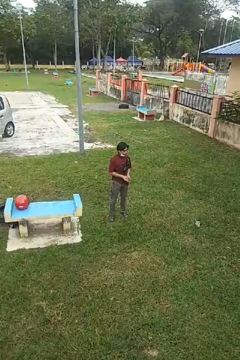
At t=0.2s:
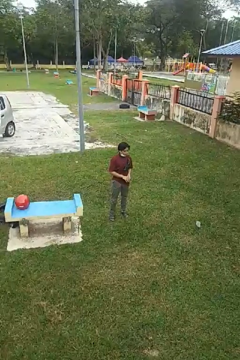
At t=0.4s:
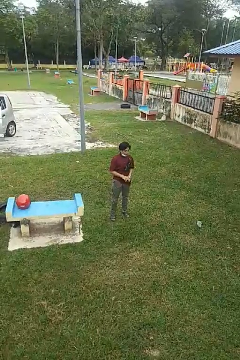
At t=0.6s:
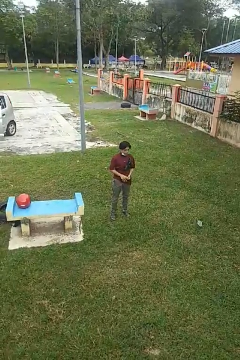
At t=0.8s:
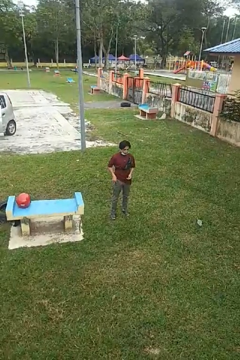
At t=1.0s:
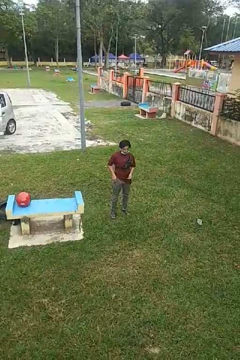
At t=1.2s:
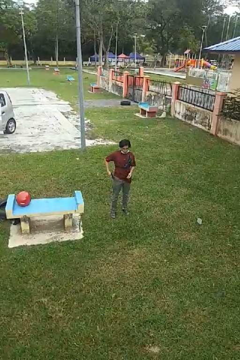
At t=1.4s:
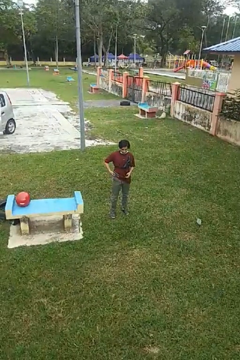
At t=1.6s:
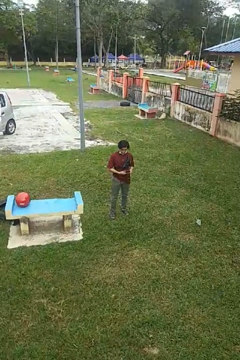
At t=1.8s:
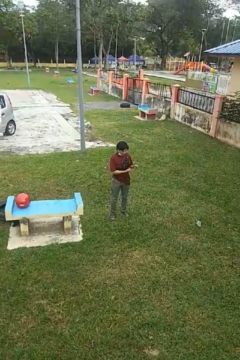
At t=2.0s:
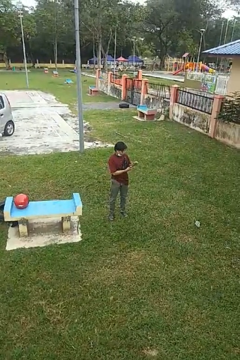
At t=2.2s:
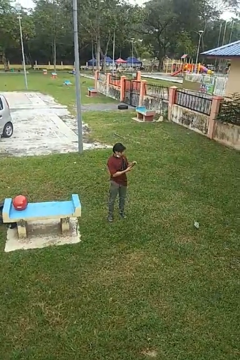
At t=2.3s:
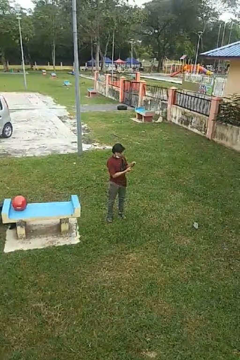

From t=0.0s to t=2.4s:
person takes phone from pocket

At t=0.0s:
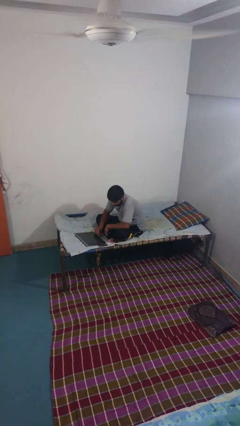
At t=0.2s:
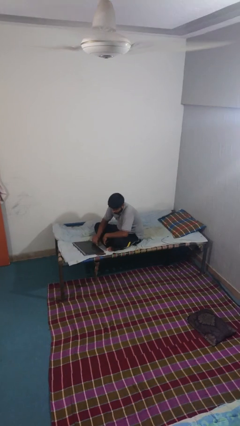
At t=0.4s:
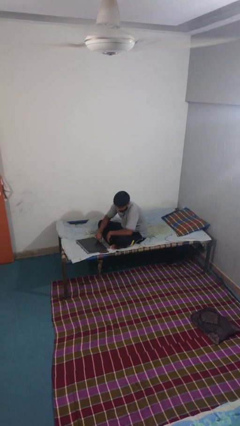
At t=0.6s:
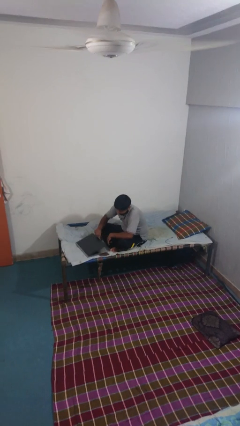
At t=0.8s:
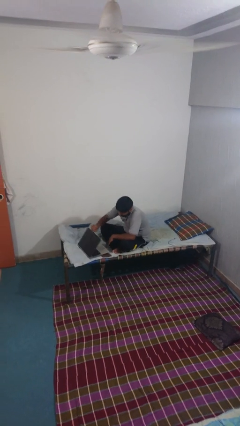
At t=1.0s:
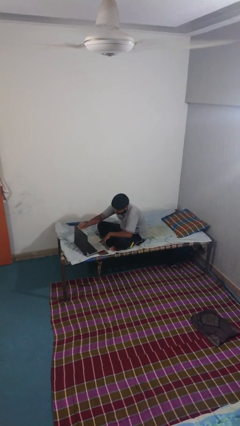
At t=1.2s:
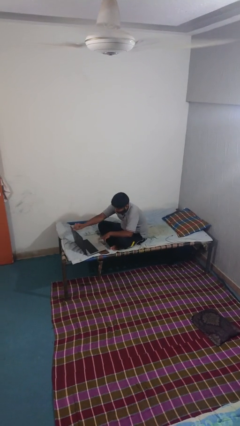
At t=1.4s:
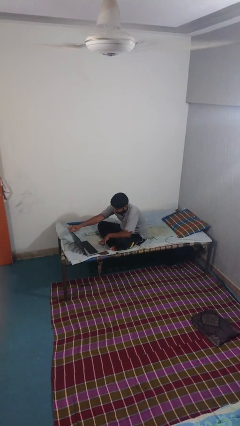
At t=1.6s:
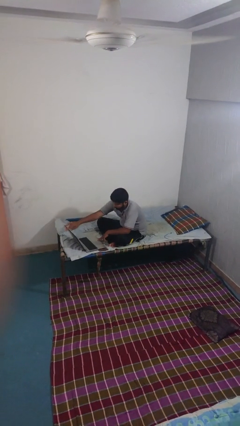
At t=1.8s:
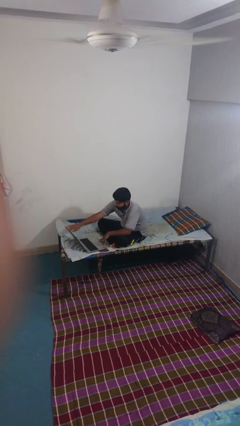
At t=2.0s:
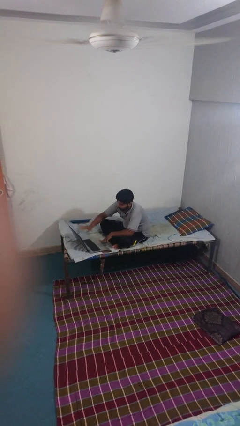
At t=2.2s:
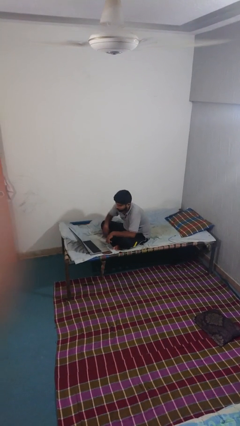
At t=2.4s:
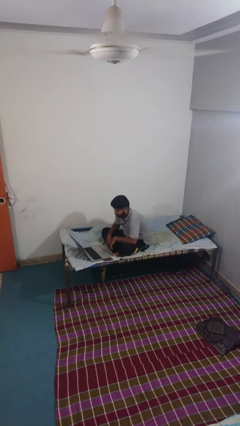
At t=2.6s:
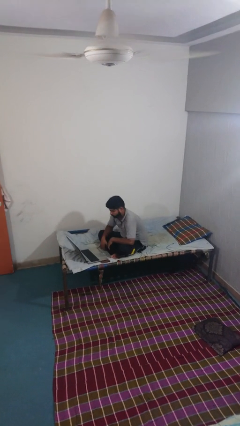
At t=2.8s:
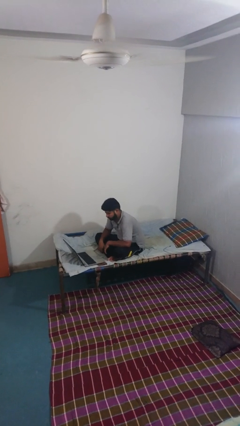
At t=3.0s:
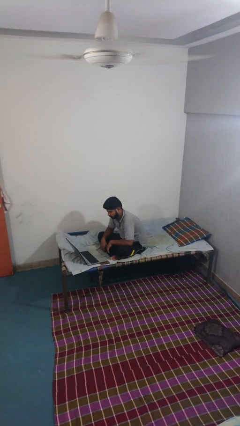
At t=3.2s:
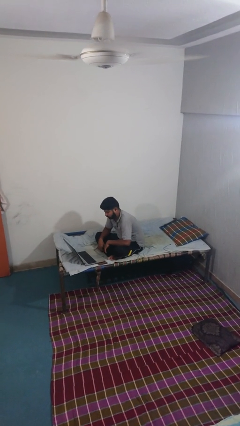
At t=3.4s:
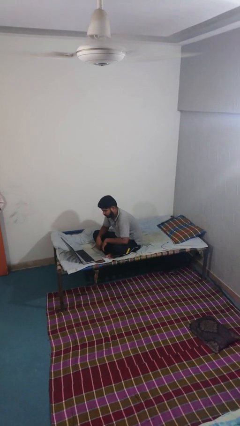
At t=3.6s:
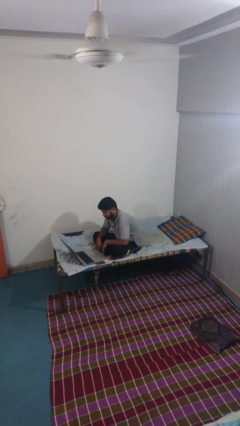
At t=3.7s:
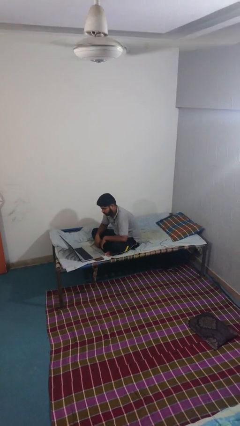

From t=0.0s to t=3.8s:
person closes laptop

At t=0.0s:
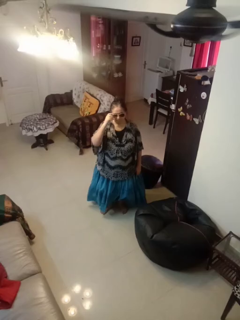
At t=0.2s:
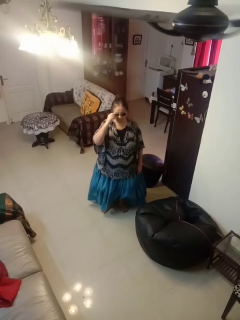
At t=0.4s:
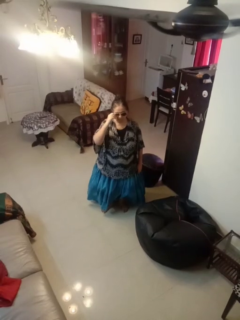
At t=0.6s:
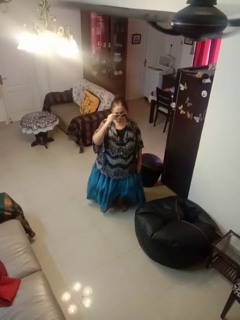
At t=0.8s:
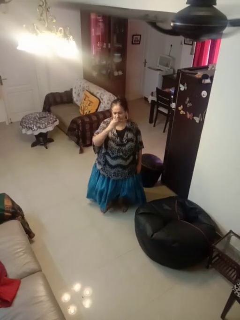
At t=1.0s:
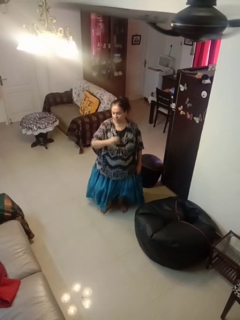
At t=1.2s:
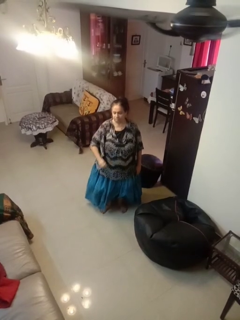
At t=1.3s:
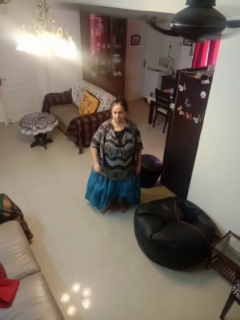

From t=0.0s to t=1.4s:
person takes off sunglasses

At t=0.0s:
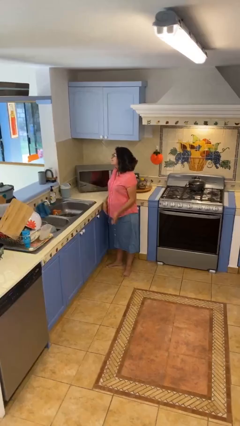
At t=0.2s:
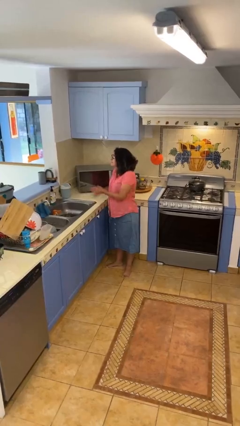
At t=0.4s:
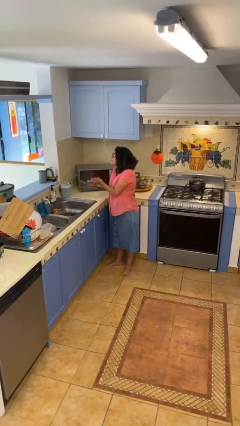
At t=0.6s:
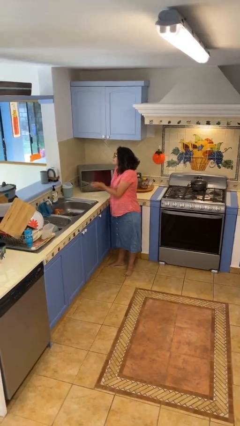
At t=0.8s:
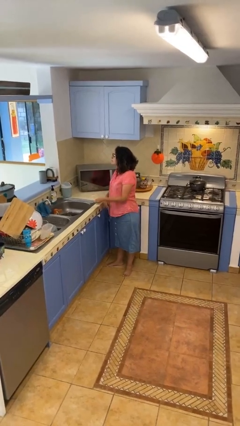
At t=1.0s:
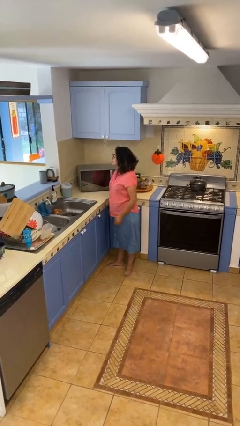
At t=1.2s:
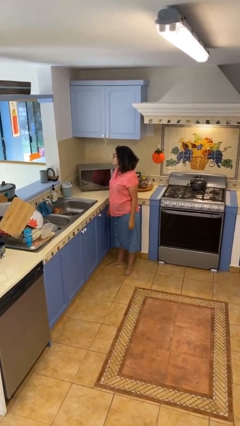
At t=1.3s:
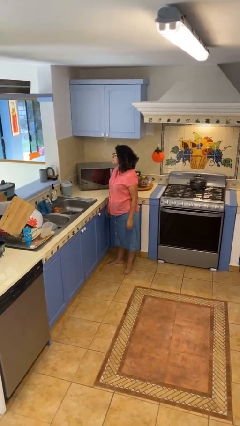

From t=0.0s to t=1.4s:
person claps hands

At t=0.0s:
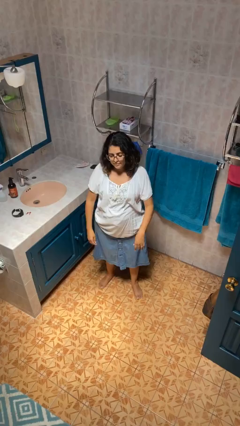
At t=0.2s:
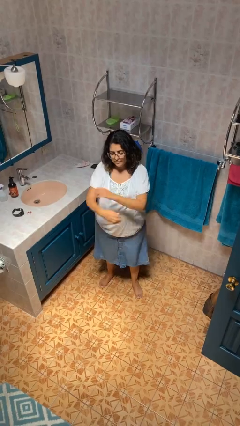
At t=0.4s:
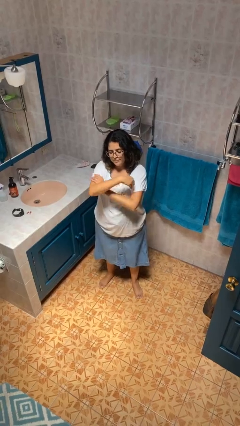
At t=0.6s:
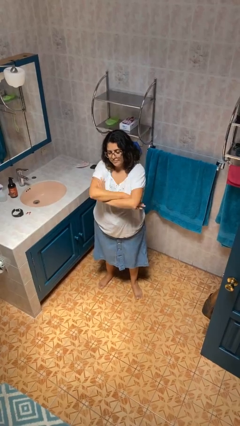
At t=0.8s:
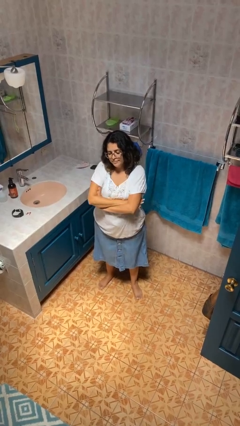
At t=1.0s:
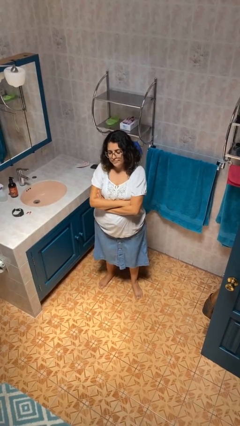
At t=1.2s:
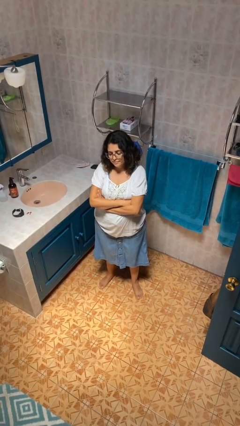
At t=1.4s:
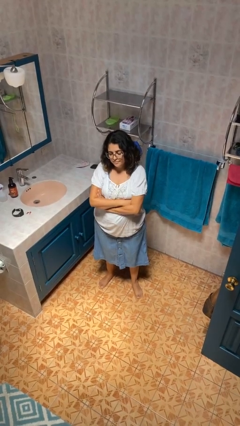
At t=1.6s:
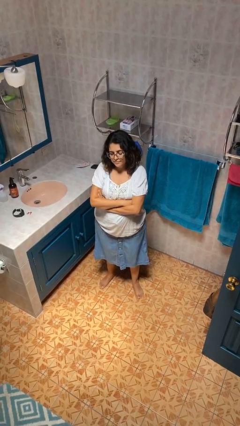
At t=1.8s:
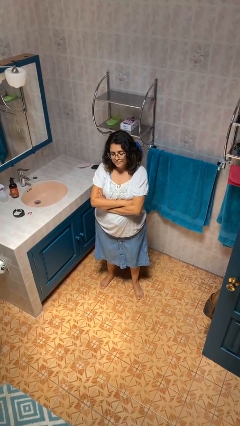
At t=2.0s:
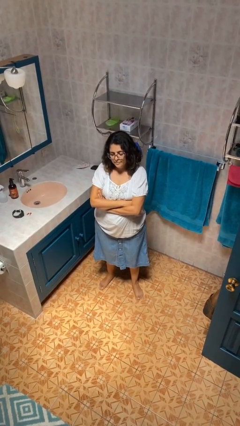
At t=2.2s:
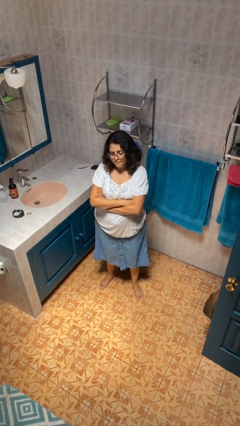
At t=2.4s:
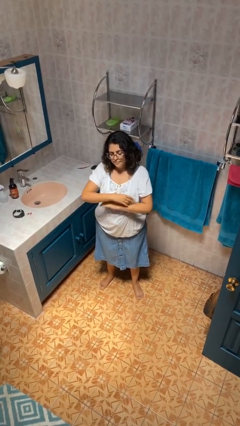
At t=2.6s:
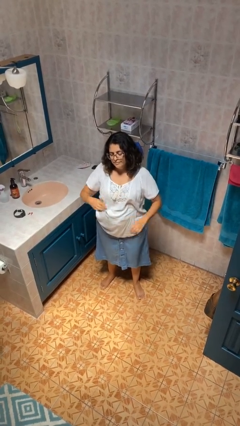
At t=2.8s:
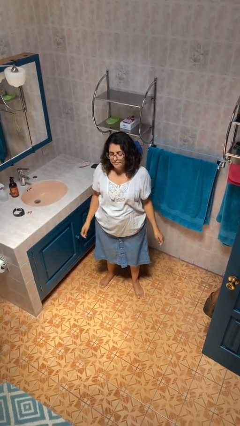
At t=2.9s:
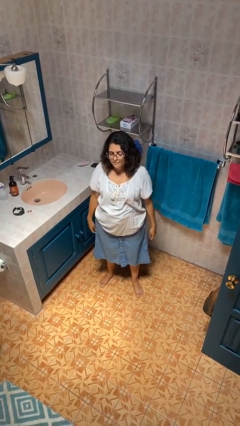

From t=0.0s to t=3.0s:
person crosses arms

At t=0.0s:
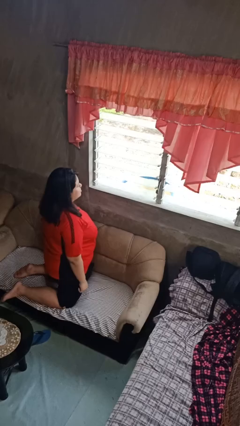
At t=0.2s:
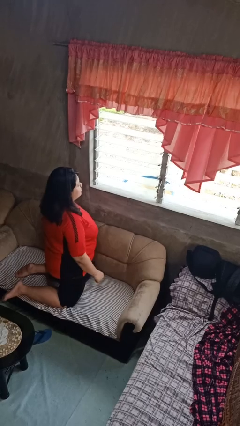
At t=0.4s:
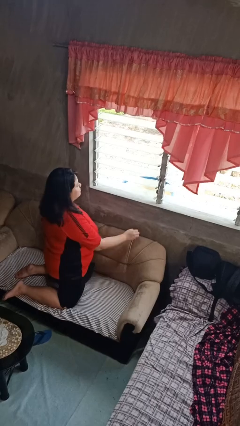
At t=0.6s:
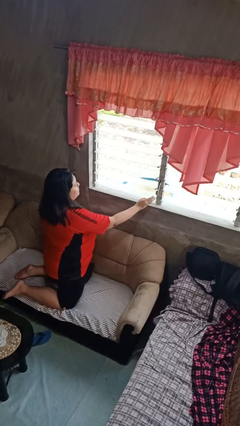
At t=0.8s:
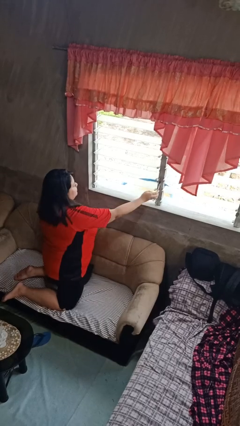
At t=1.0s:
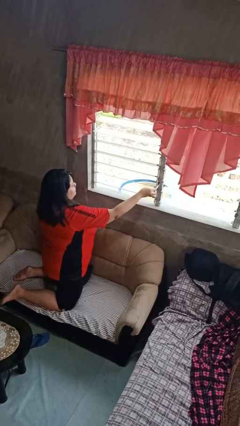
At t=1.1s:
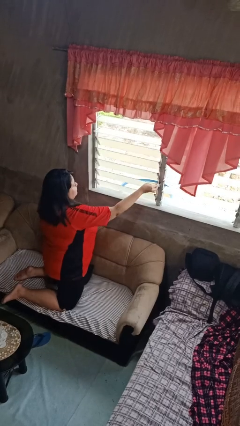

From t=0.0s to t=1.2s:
person closes home window

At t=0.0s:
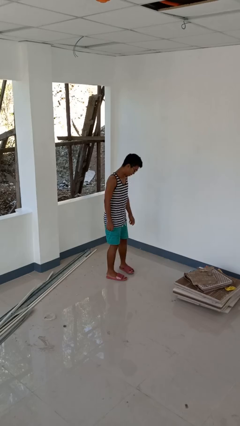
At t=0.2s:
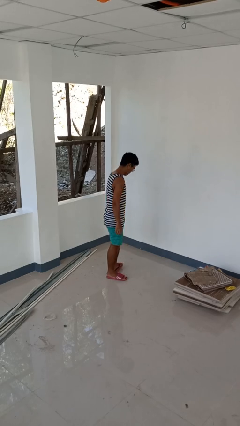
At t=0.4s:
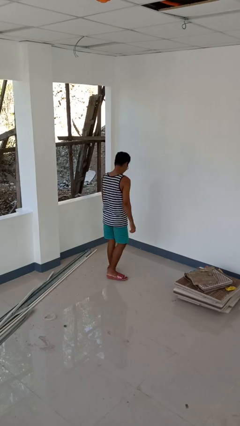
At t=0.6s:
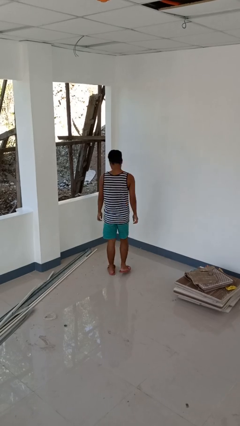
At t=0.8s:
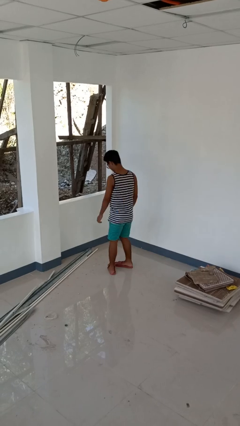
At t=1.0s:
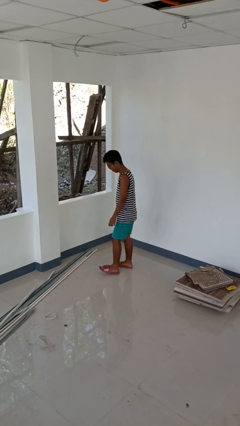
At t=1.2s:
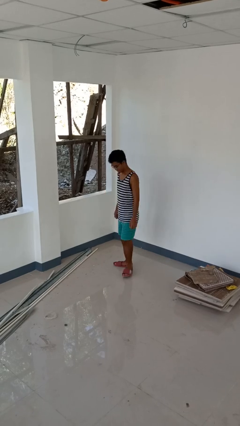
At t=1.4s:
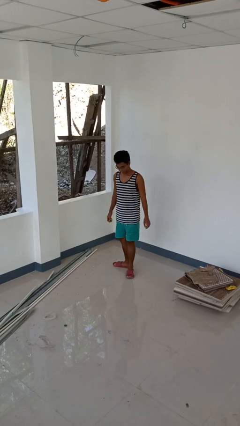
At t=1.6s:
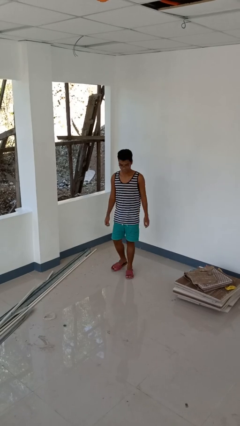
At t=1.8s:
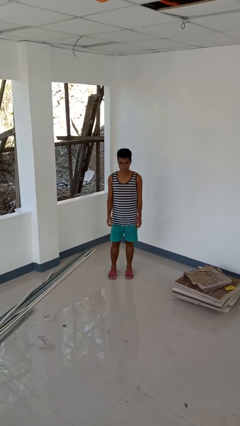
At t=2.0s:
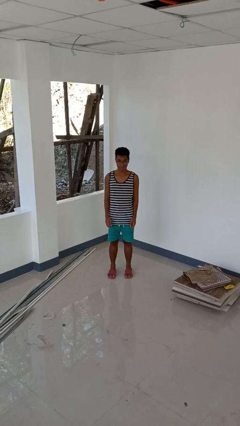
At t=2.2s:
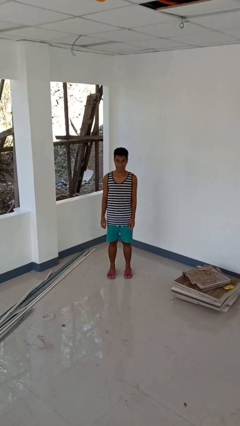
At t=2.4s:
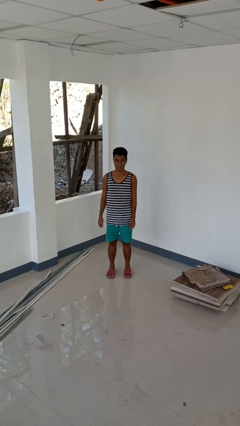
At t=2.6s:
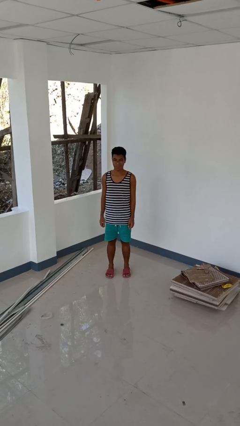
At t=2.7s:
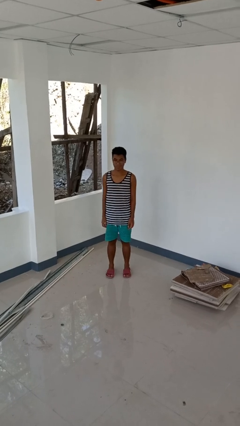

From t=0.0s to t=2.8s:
person twirls

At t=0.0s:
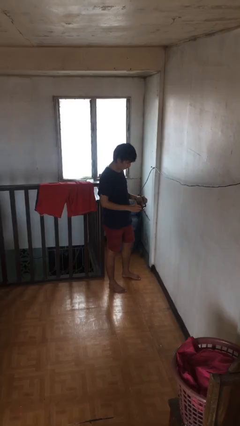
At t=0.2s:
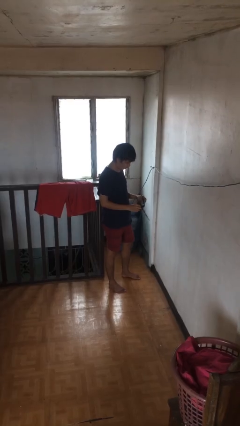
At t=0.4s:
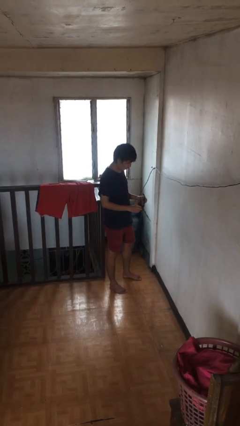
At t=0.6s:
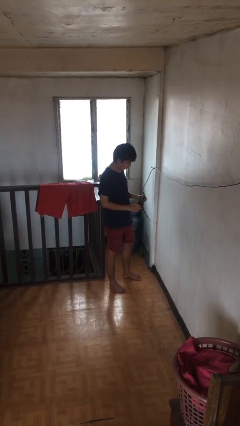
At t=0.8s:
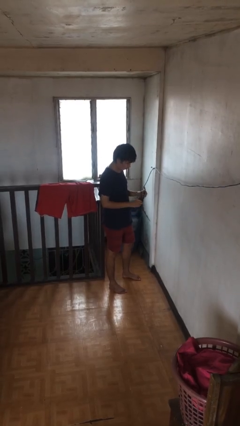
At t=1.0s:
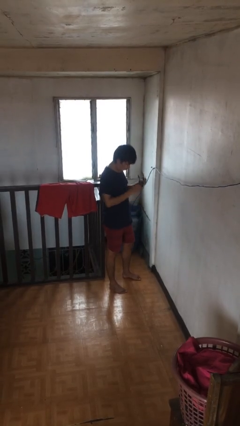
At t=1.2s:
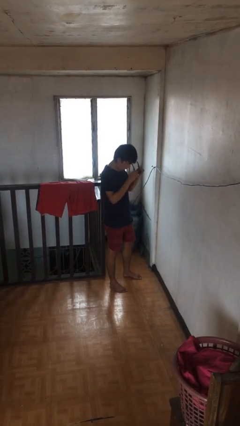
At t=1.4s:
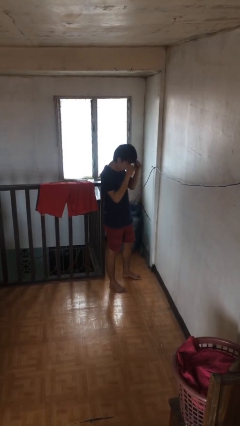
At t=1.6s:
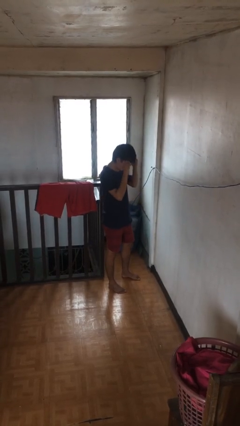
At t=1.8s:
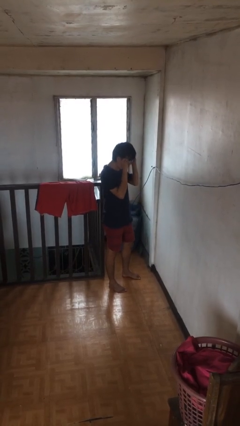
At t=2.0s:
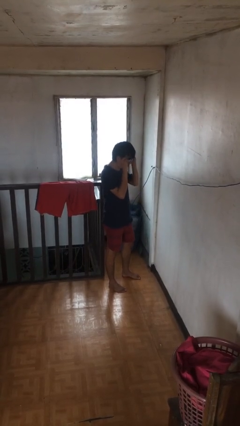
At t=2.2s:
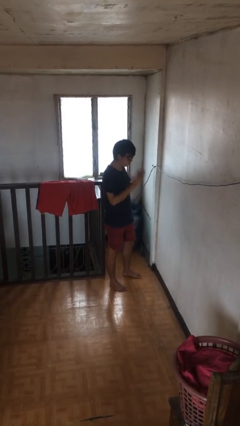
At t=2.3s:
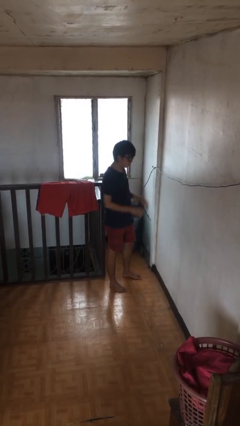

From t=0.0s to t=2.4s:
person puts on sunglasses
